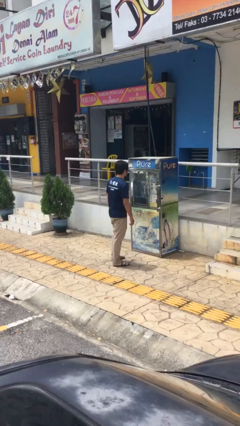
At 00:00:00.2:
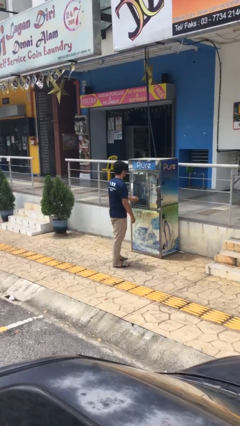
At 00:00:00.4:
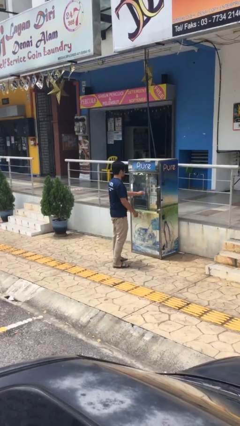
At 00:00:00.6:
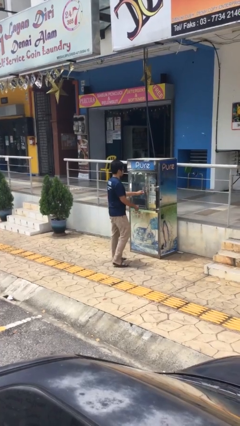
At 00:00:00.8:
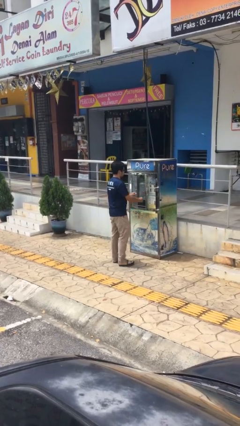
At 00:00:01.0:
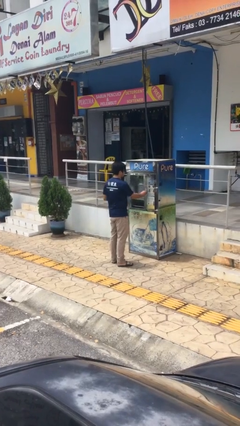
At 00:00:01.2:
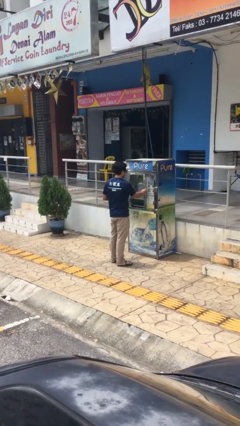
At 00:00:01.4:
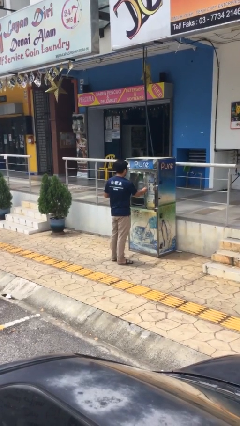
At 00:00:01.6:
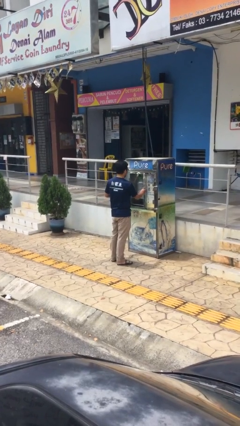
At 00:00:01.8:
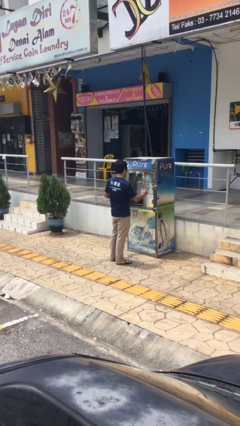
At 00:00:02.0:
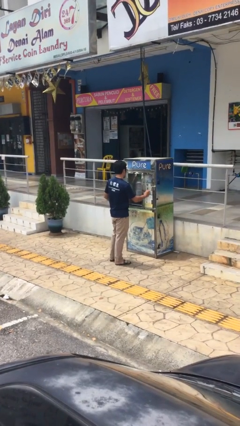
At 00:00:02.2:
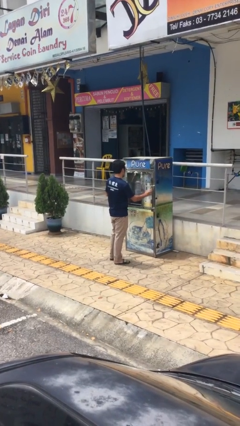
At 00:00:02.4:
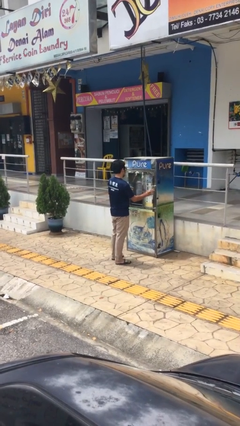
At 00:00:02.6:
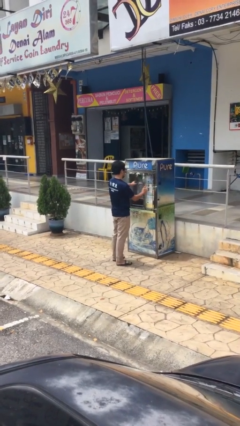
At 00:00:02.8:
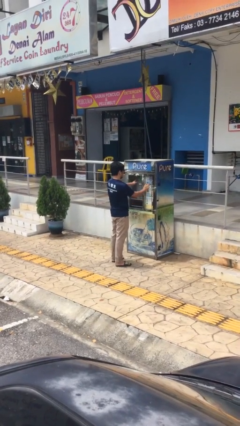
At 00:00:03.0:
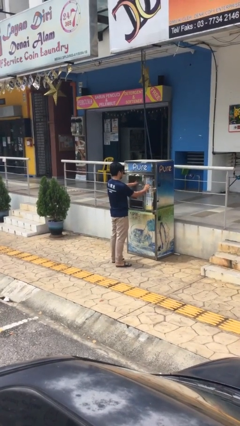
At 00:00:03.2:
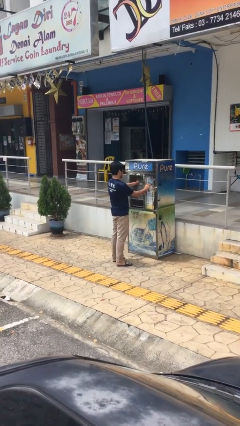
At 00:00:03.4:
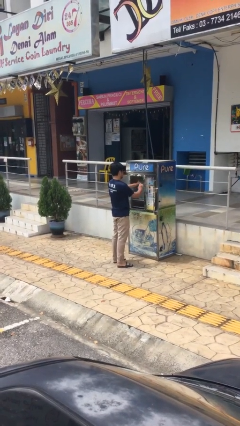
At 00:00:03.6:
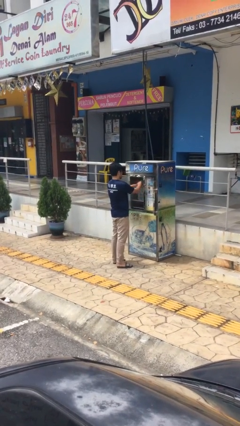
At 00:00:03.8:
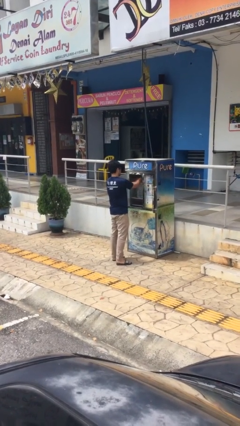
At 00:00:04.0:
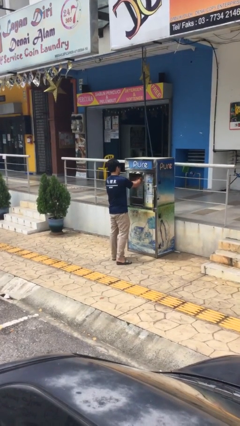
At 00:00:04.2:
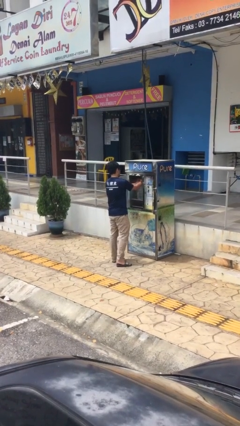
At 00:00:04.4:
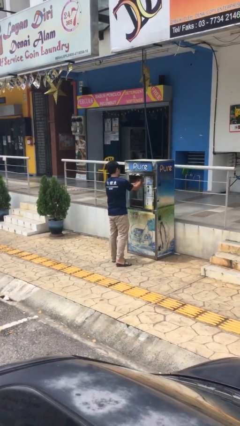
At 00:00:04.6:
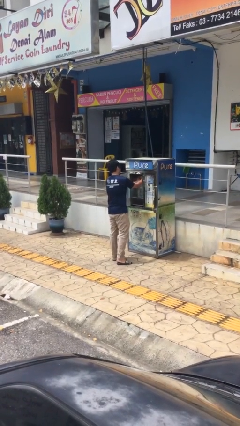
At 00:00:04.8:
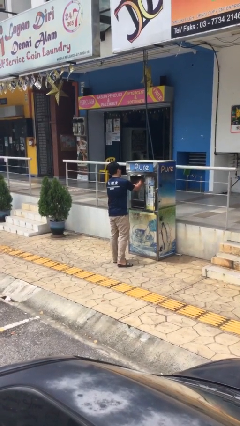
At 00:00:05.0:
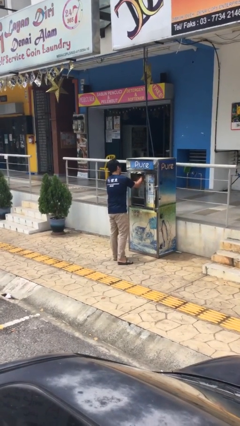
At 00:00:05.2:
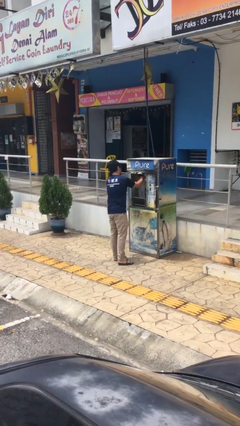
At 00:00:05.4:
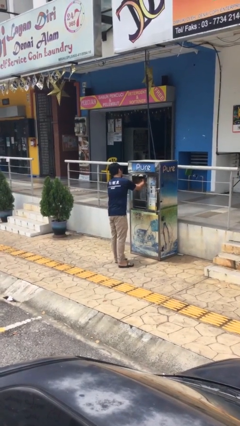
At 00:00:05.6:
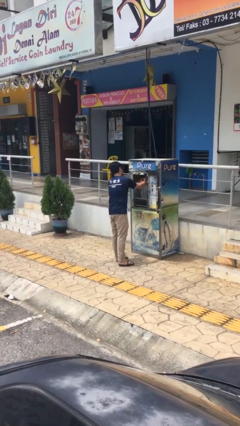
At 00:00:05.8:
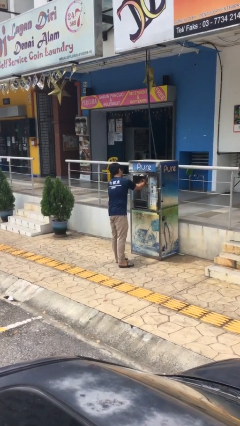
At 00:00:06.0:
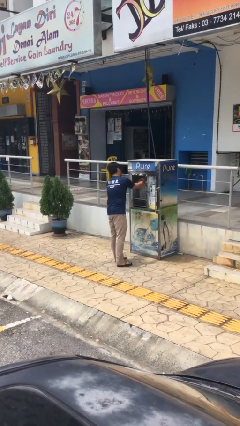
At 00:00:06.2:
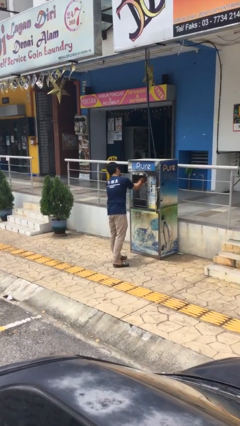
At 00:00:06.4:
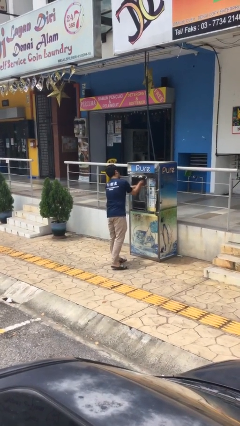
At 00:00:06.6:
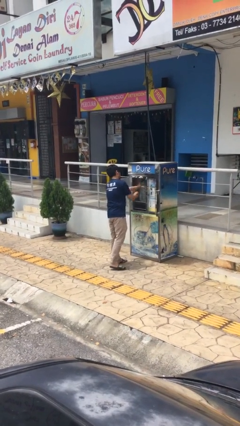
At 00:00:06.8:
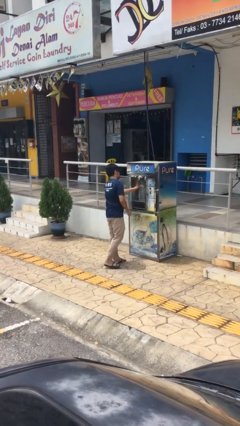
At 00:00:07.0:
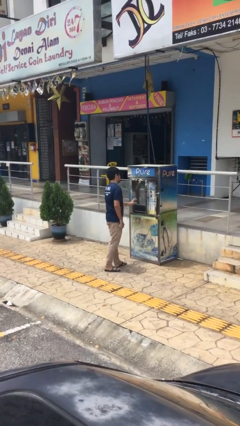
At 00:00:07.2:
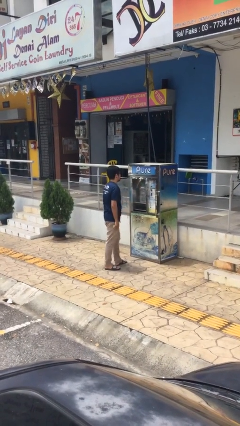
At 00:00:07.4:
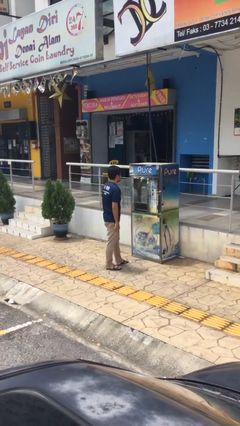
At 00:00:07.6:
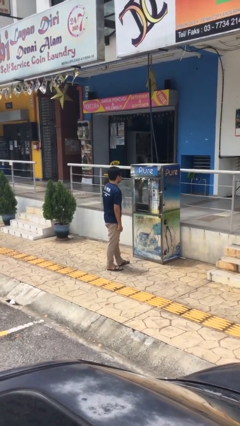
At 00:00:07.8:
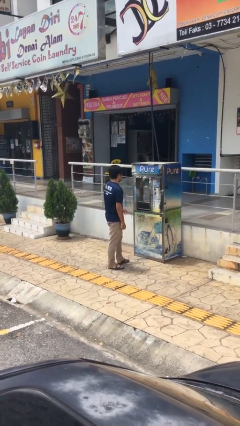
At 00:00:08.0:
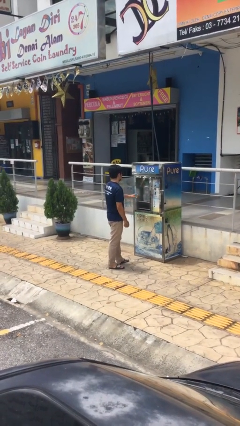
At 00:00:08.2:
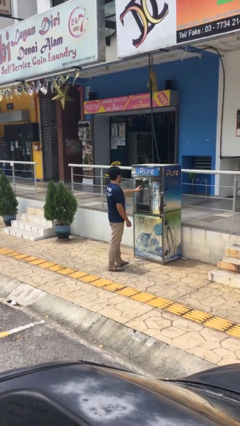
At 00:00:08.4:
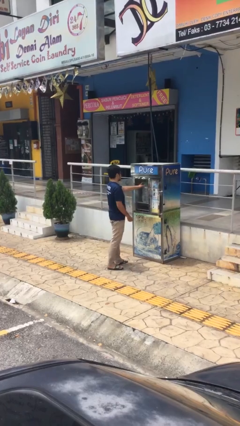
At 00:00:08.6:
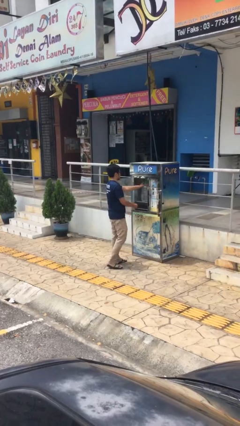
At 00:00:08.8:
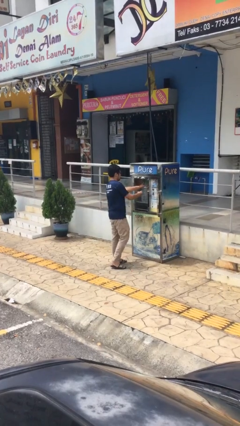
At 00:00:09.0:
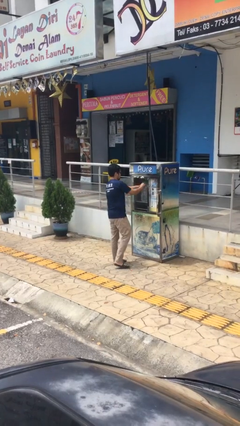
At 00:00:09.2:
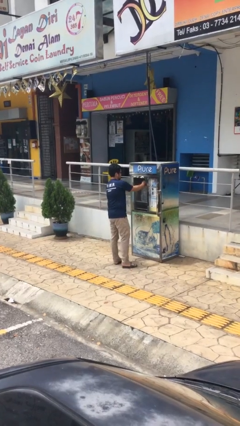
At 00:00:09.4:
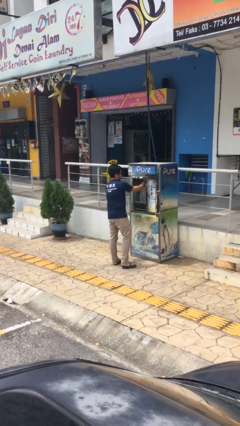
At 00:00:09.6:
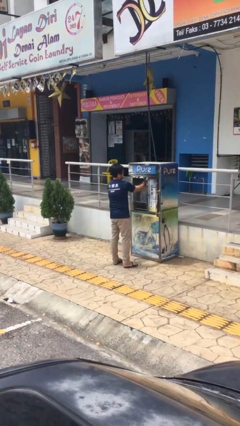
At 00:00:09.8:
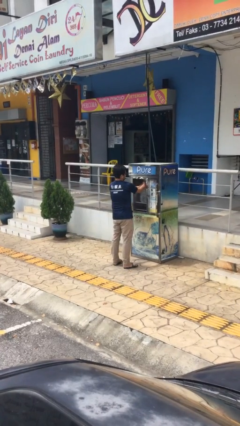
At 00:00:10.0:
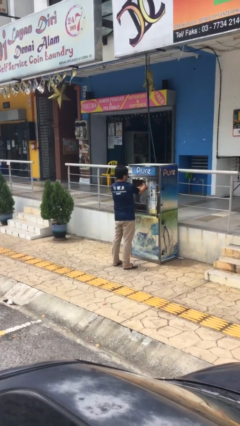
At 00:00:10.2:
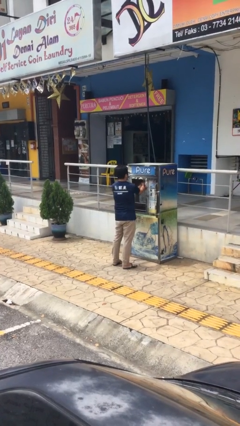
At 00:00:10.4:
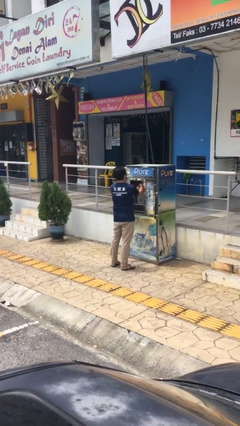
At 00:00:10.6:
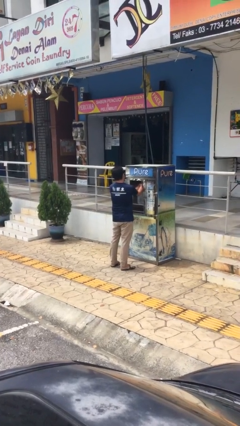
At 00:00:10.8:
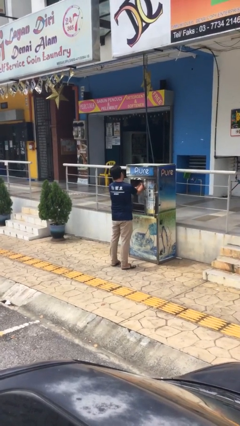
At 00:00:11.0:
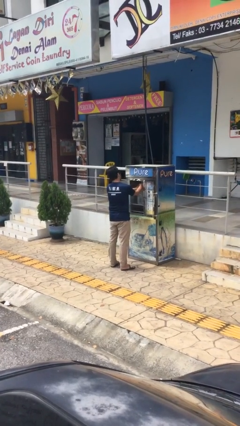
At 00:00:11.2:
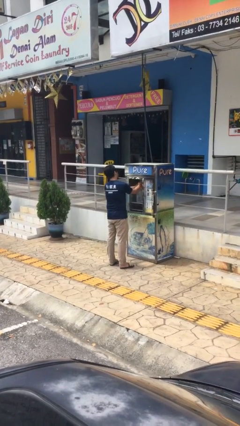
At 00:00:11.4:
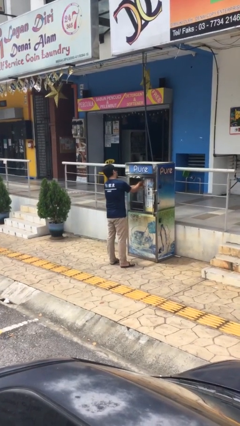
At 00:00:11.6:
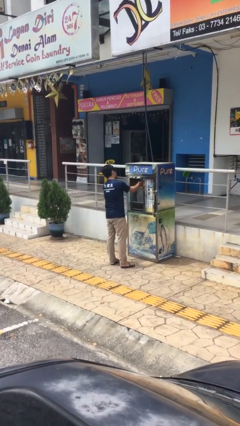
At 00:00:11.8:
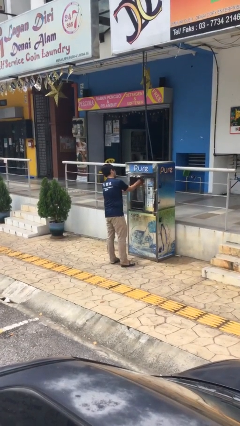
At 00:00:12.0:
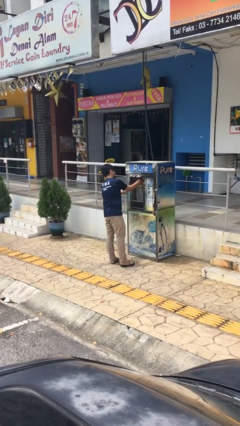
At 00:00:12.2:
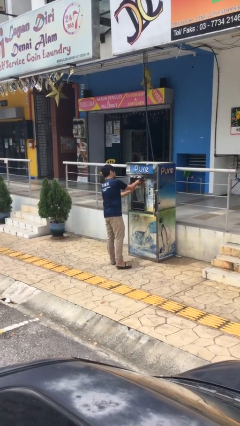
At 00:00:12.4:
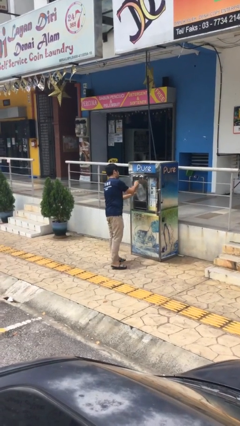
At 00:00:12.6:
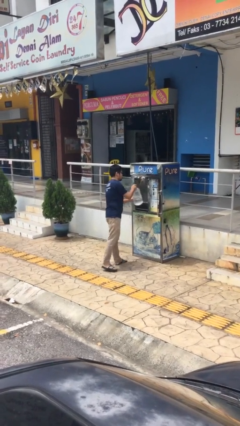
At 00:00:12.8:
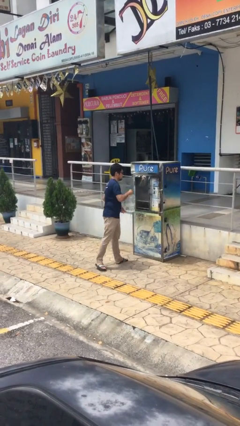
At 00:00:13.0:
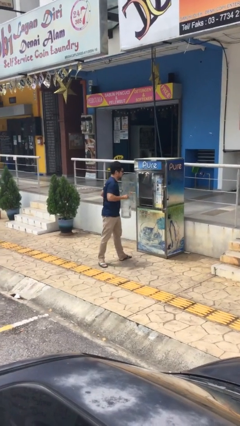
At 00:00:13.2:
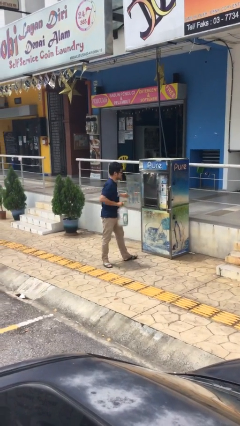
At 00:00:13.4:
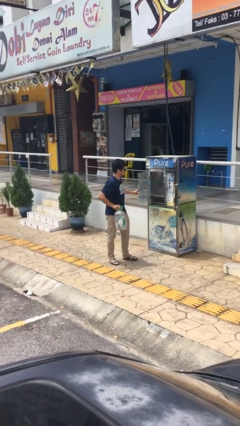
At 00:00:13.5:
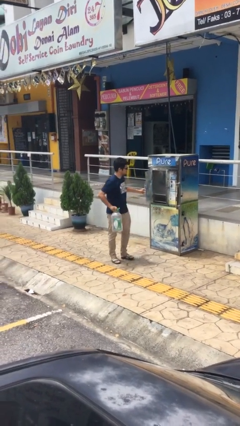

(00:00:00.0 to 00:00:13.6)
person purchases from machine

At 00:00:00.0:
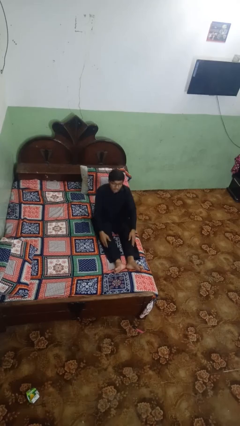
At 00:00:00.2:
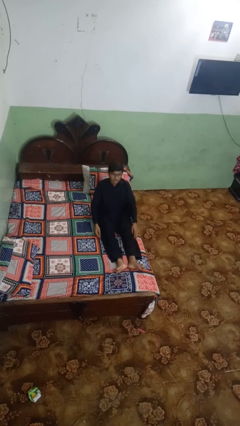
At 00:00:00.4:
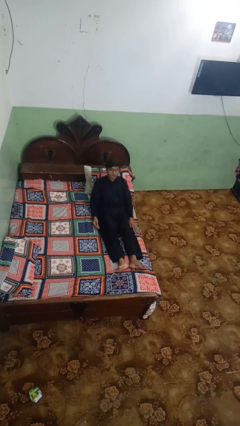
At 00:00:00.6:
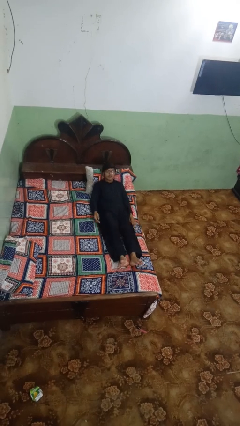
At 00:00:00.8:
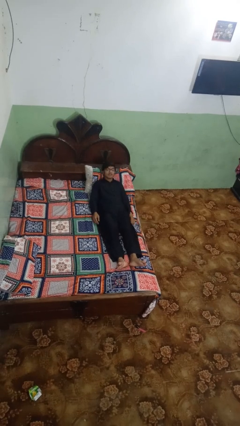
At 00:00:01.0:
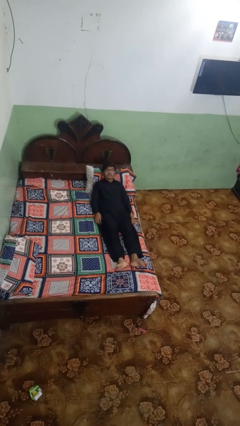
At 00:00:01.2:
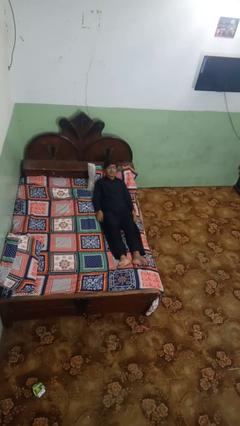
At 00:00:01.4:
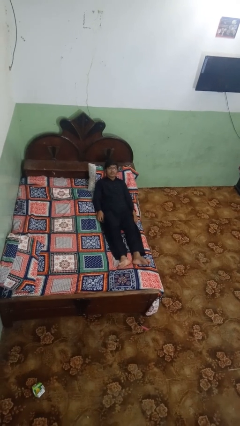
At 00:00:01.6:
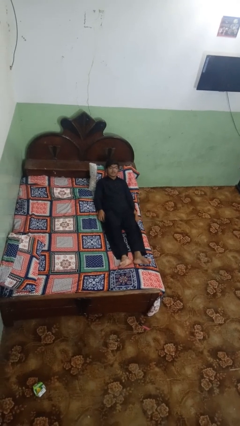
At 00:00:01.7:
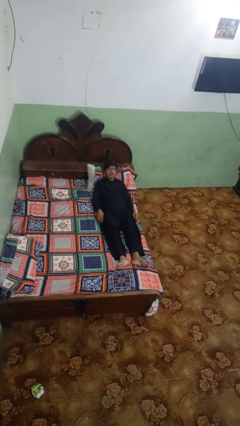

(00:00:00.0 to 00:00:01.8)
person lies down on bed

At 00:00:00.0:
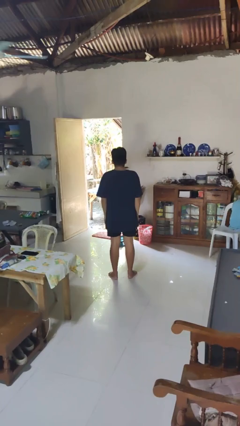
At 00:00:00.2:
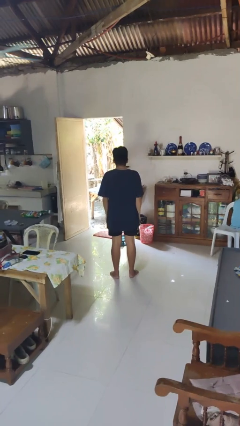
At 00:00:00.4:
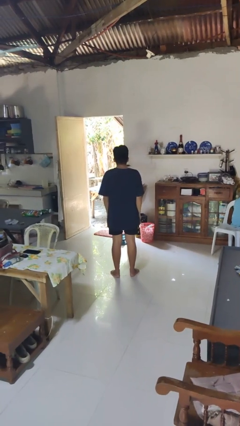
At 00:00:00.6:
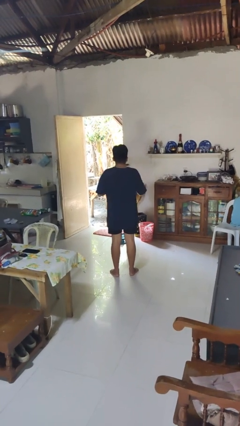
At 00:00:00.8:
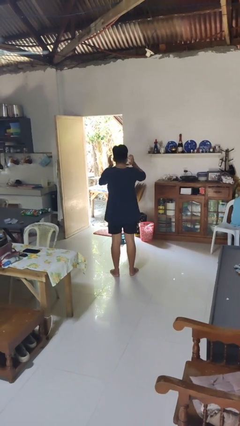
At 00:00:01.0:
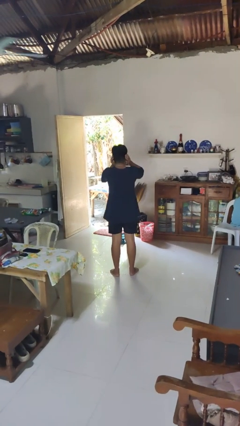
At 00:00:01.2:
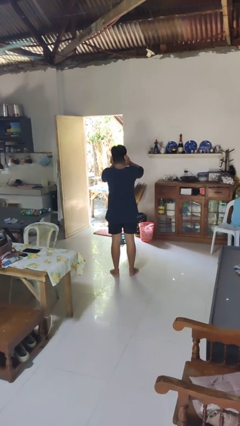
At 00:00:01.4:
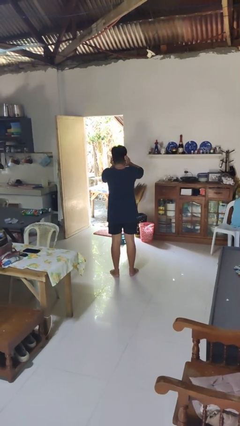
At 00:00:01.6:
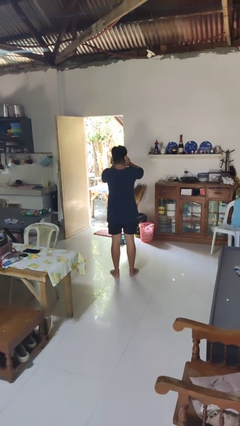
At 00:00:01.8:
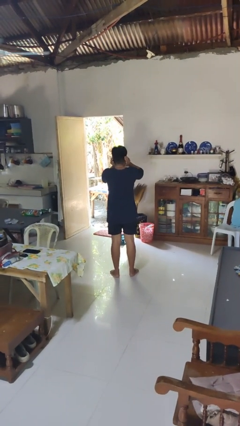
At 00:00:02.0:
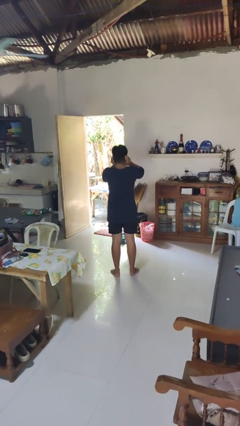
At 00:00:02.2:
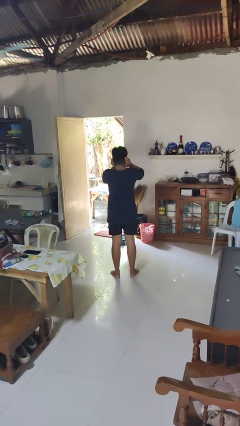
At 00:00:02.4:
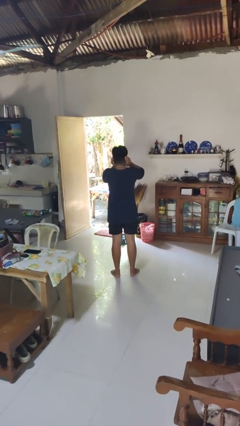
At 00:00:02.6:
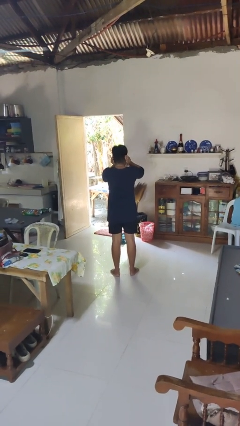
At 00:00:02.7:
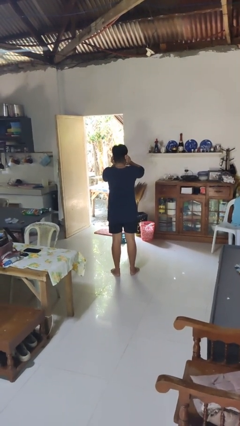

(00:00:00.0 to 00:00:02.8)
person puts fingers in ear
